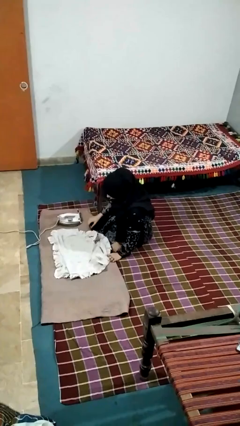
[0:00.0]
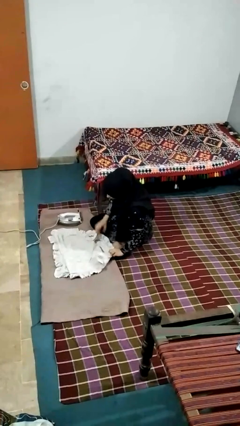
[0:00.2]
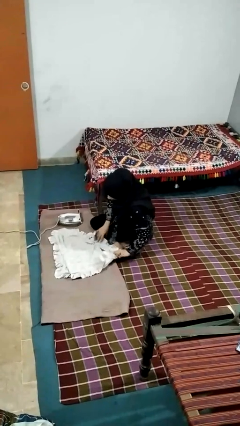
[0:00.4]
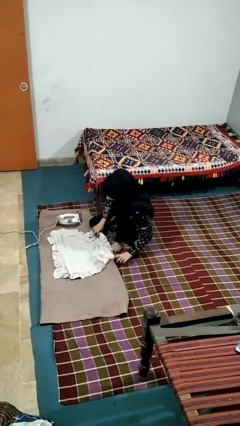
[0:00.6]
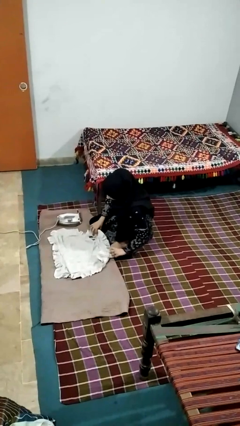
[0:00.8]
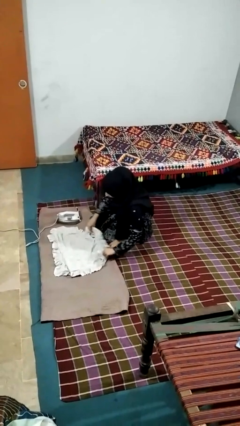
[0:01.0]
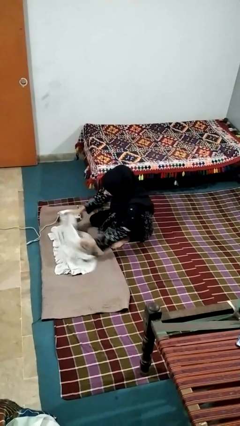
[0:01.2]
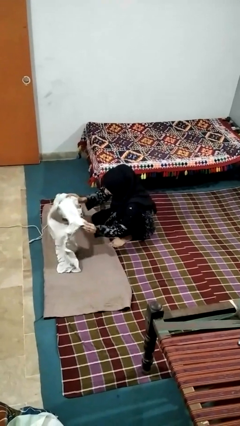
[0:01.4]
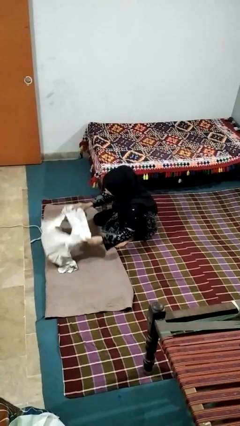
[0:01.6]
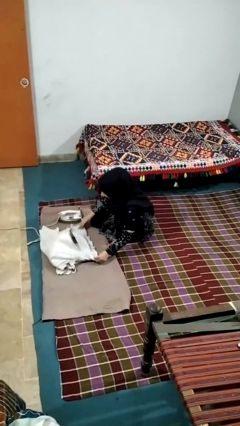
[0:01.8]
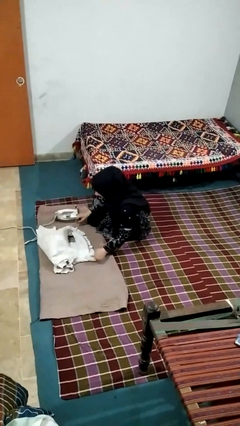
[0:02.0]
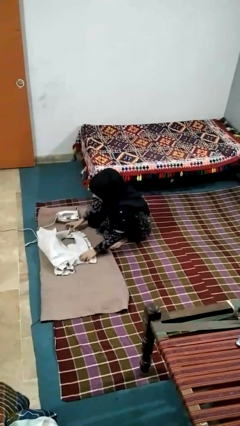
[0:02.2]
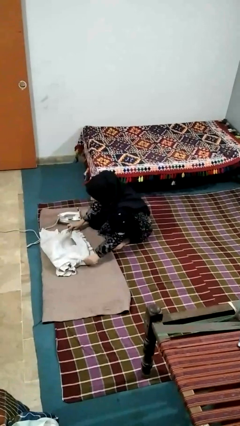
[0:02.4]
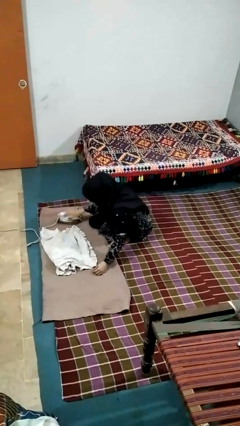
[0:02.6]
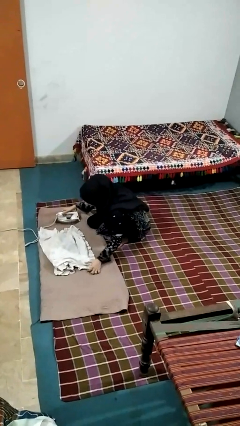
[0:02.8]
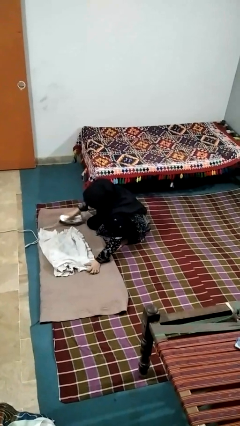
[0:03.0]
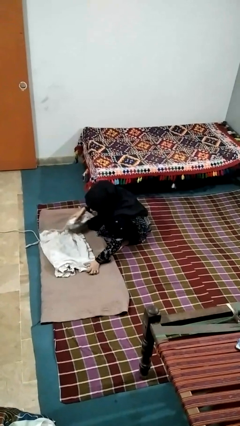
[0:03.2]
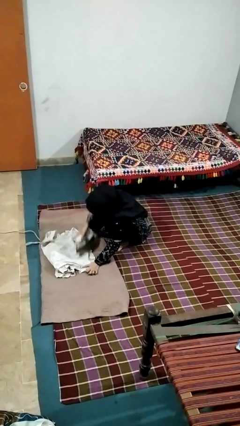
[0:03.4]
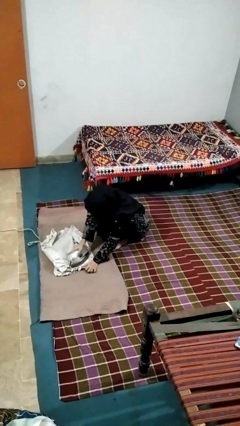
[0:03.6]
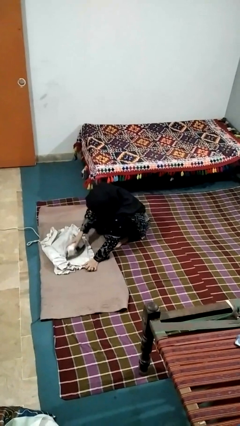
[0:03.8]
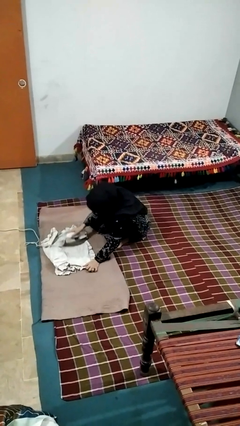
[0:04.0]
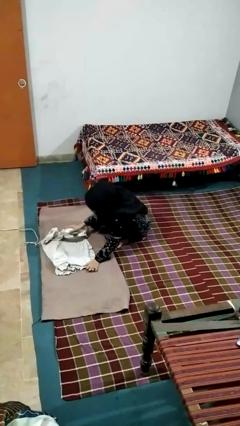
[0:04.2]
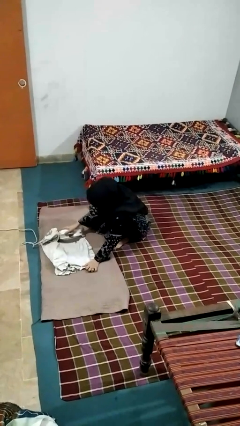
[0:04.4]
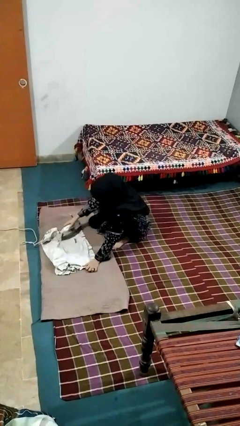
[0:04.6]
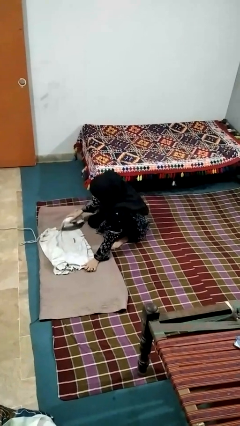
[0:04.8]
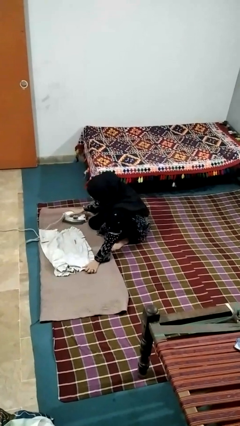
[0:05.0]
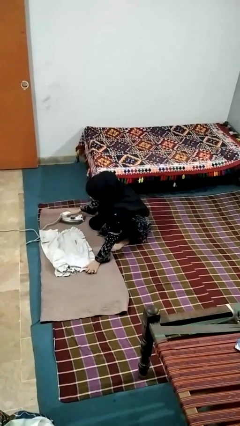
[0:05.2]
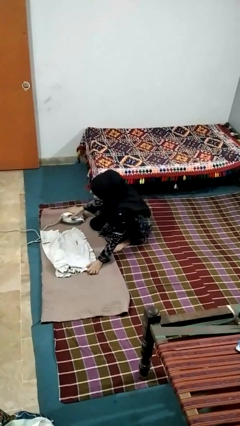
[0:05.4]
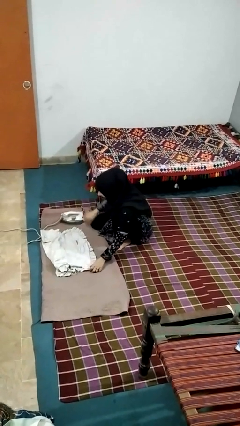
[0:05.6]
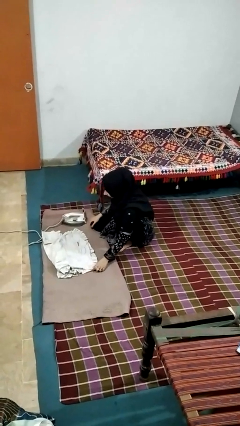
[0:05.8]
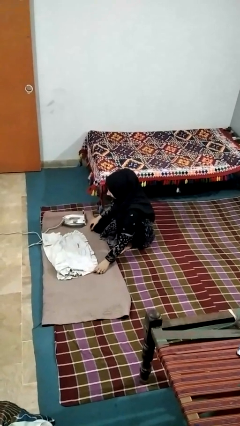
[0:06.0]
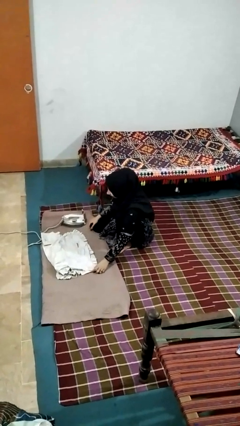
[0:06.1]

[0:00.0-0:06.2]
person irons clothes

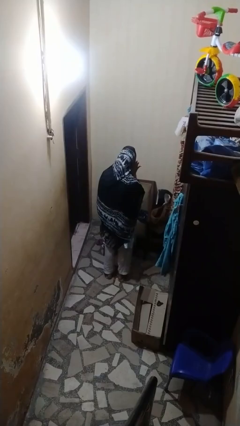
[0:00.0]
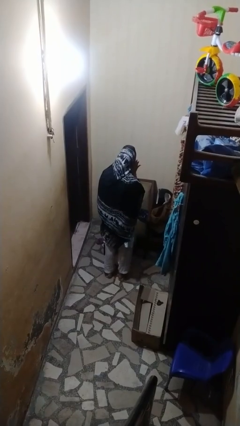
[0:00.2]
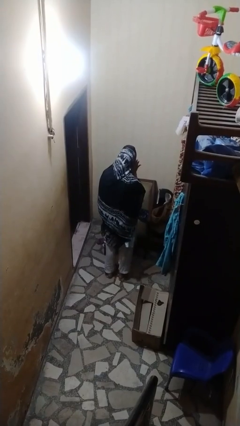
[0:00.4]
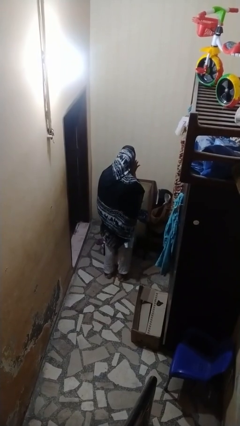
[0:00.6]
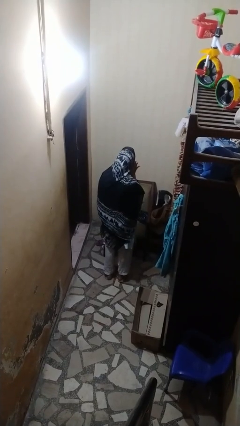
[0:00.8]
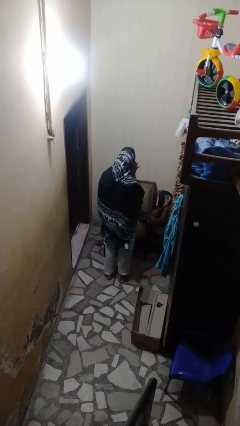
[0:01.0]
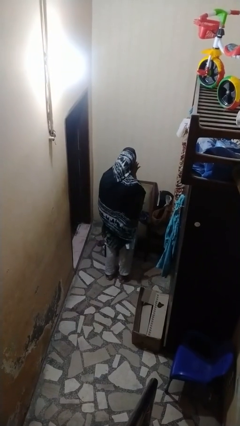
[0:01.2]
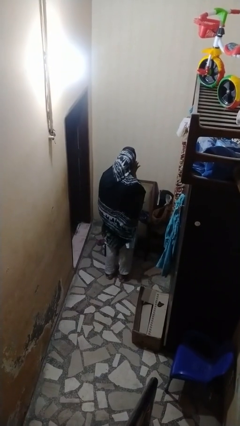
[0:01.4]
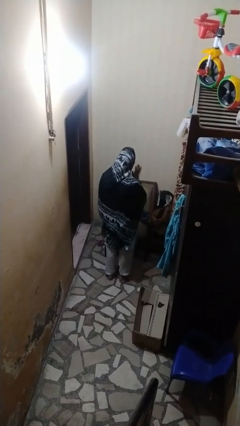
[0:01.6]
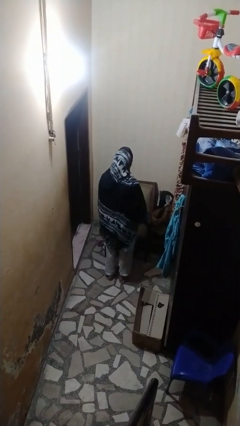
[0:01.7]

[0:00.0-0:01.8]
person gestures listen closely

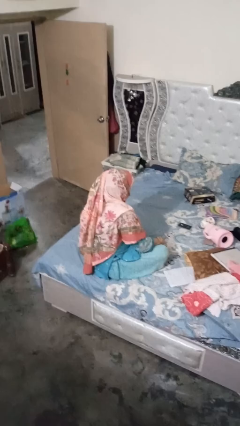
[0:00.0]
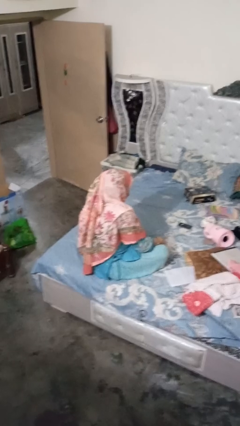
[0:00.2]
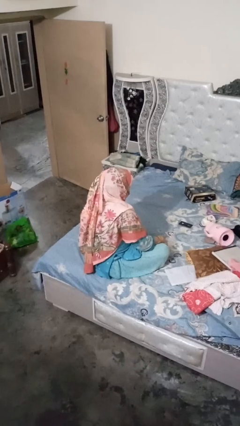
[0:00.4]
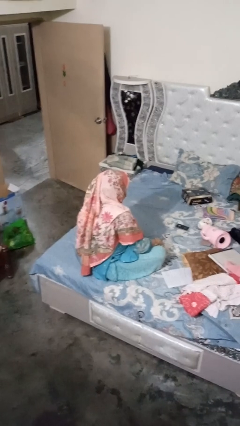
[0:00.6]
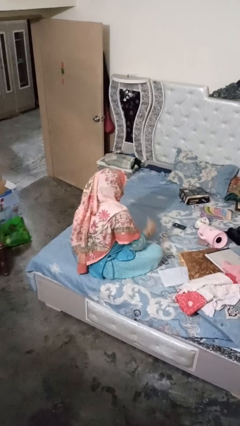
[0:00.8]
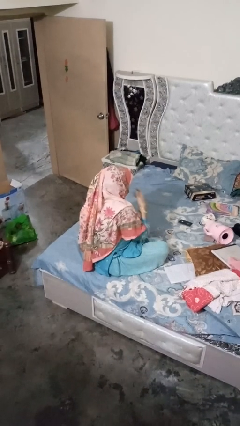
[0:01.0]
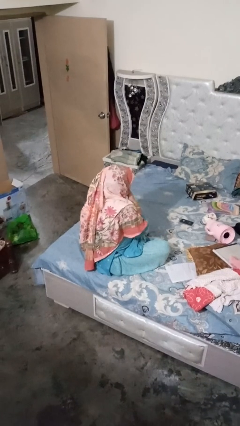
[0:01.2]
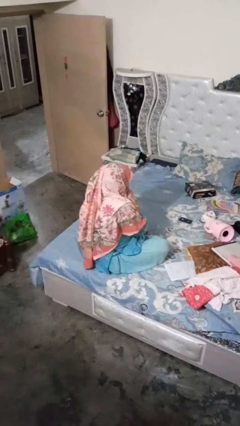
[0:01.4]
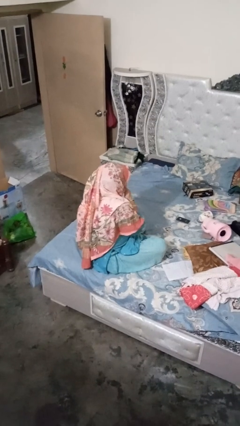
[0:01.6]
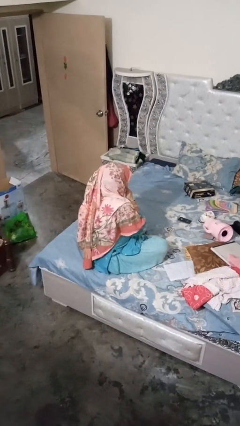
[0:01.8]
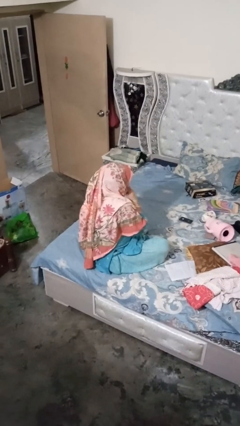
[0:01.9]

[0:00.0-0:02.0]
person strokes chin

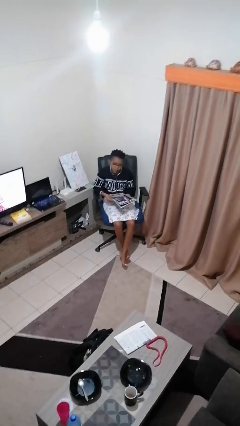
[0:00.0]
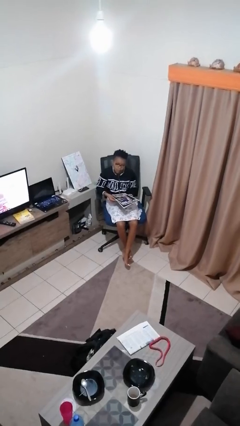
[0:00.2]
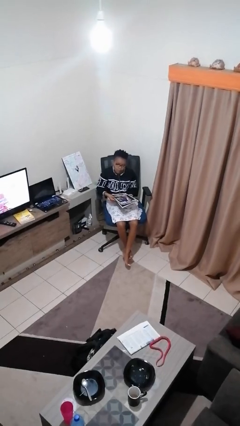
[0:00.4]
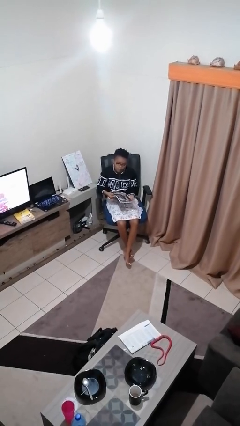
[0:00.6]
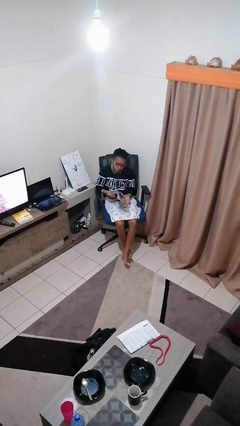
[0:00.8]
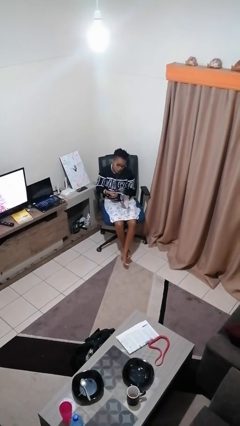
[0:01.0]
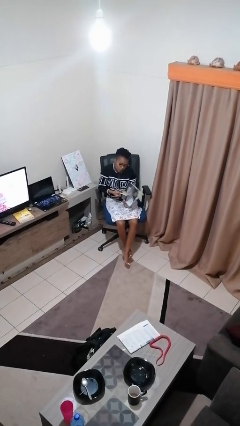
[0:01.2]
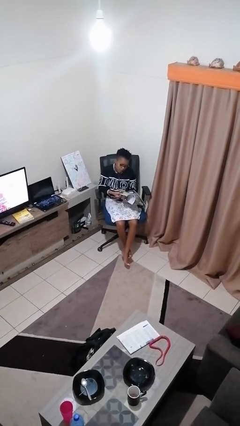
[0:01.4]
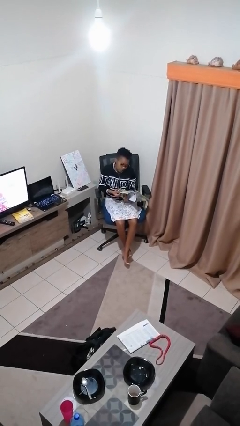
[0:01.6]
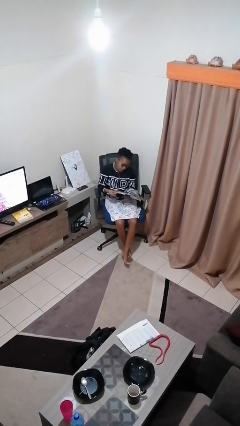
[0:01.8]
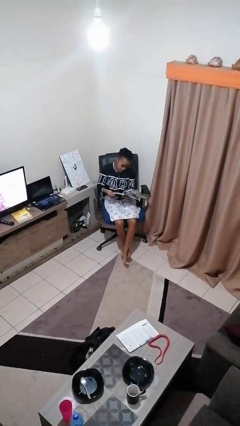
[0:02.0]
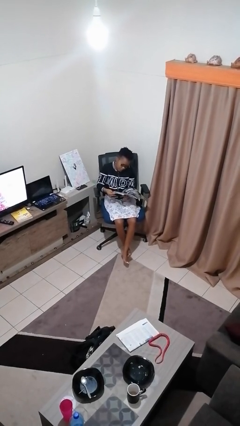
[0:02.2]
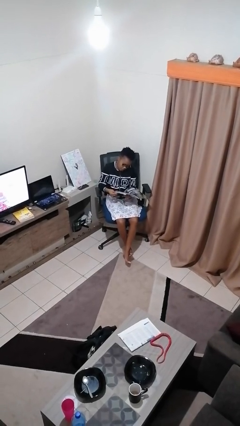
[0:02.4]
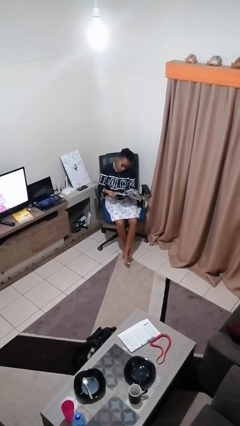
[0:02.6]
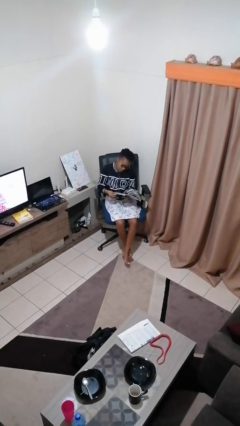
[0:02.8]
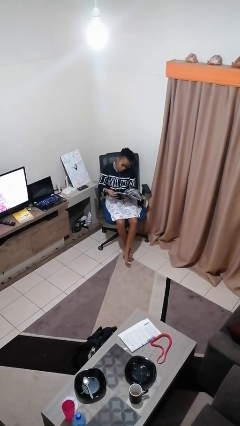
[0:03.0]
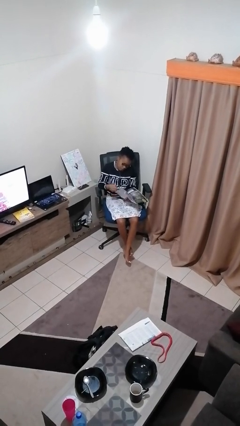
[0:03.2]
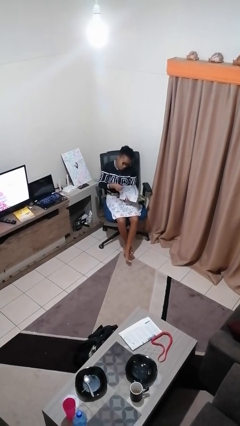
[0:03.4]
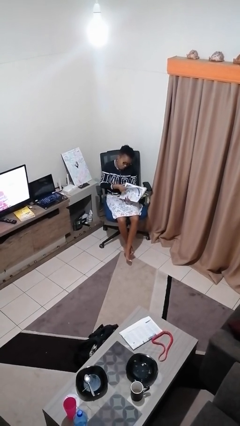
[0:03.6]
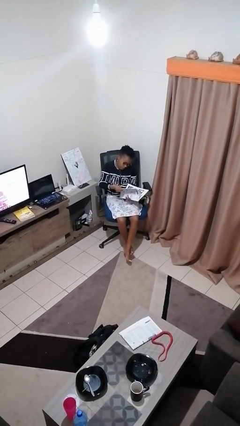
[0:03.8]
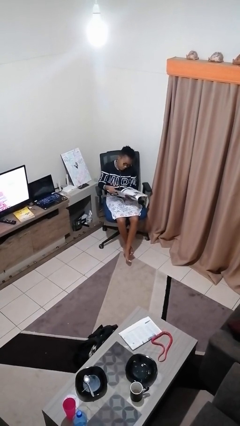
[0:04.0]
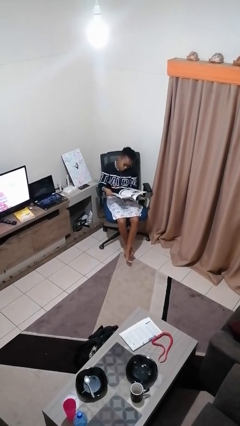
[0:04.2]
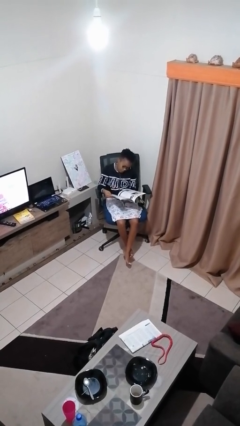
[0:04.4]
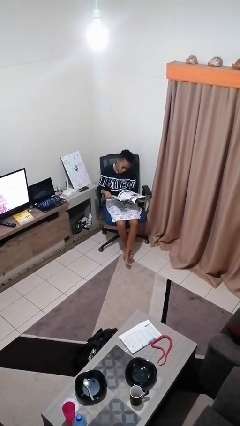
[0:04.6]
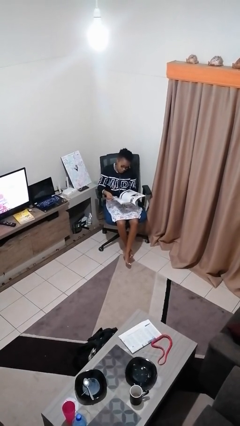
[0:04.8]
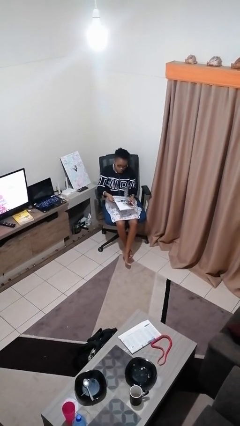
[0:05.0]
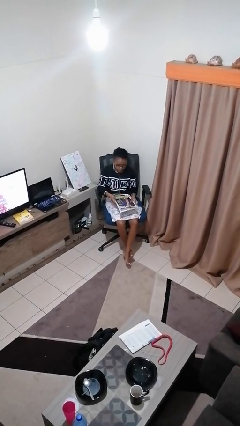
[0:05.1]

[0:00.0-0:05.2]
person reads magazine

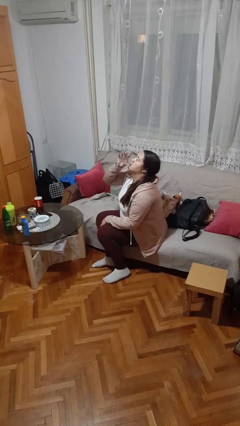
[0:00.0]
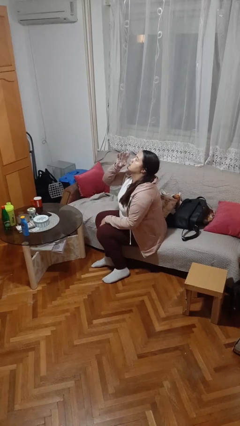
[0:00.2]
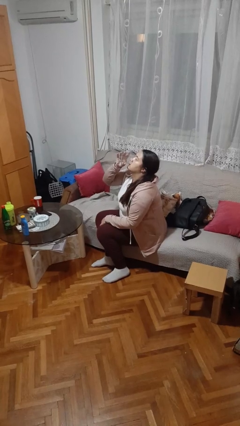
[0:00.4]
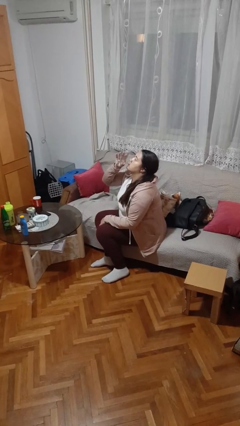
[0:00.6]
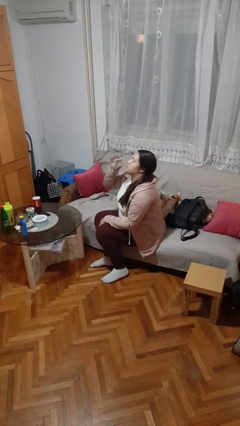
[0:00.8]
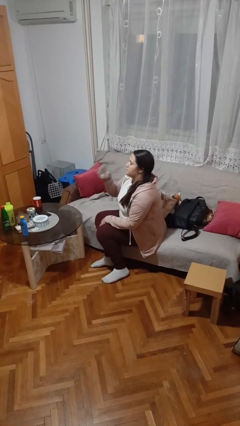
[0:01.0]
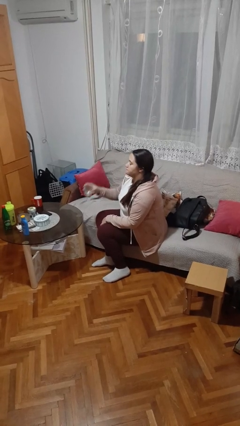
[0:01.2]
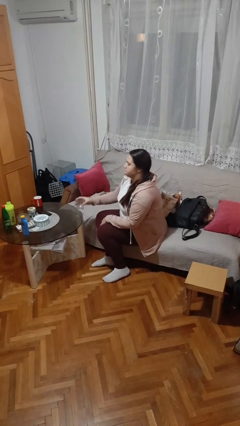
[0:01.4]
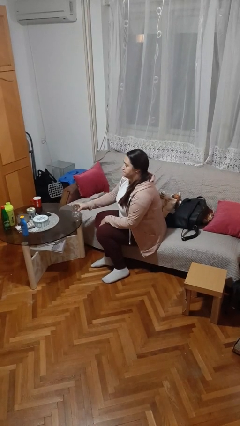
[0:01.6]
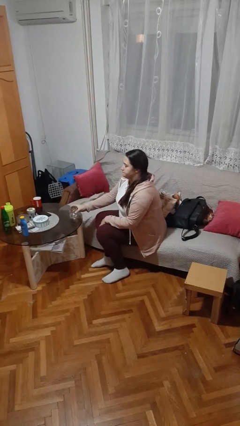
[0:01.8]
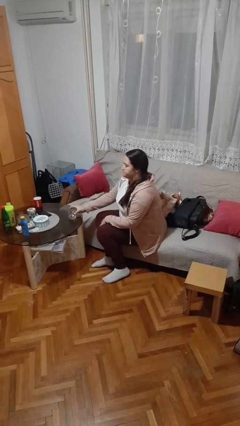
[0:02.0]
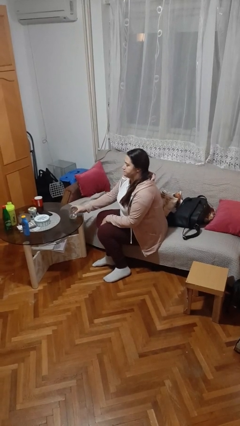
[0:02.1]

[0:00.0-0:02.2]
person puts down object on table
